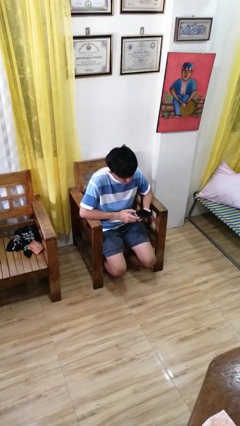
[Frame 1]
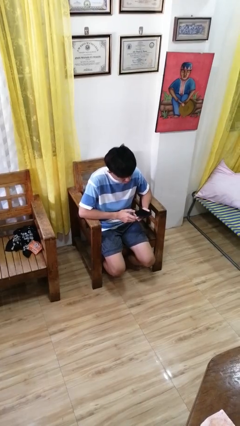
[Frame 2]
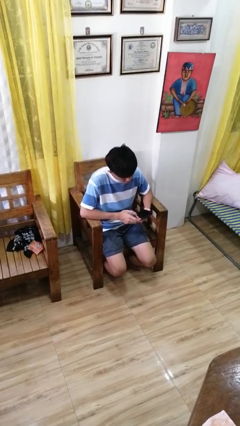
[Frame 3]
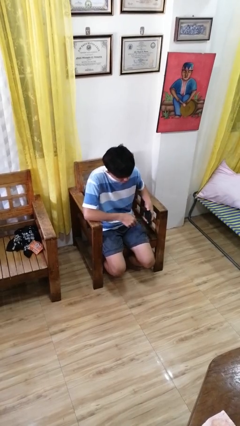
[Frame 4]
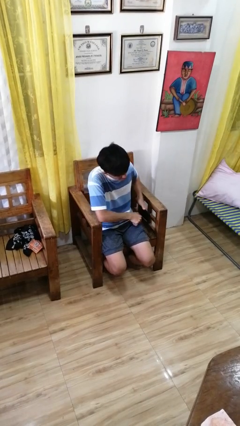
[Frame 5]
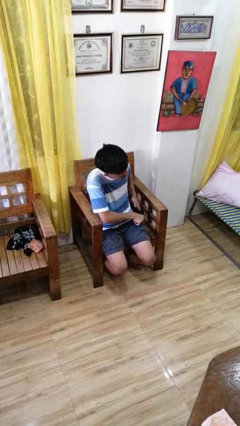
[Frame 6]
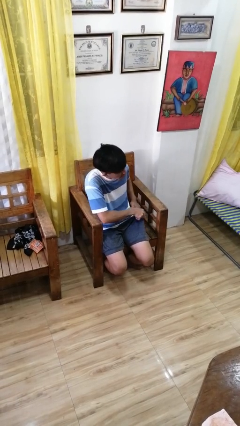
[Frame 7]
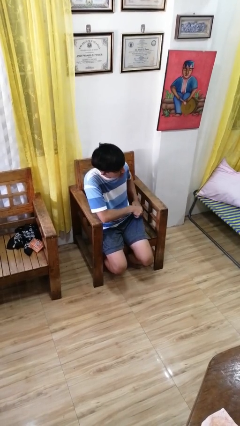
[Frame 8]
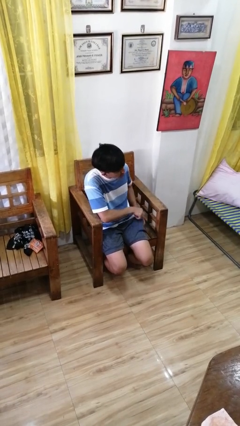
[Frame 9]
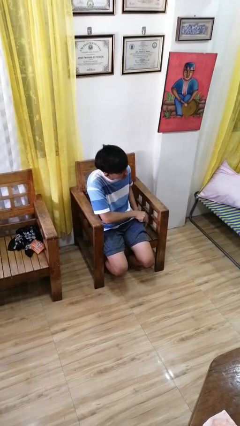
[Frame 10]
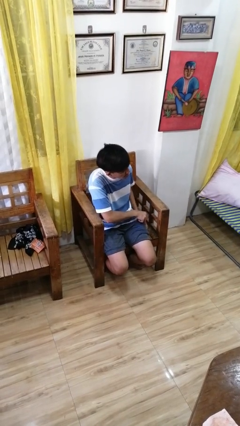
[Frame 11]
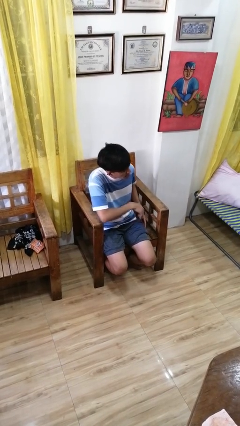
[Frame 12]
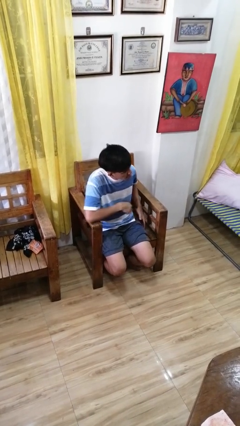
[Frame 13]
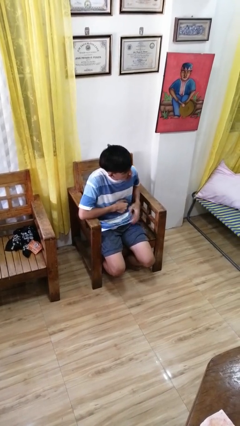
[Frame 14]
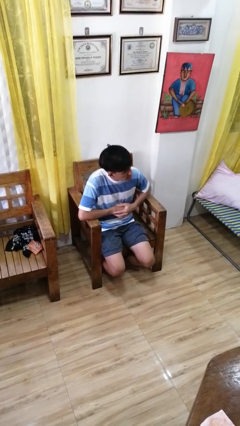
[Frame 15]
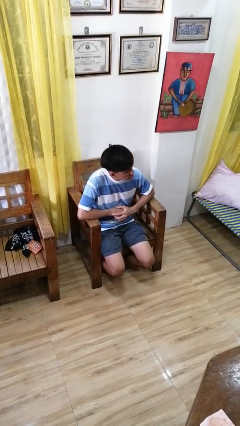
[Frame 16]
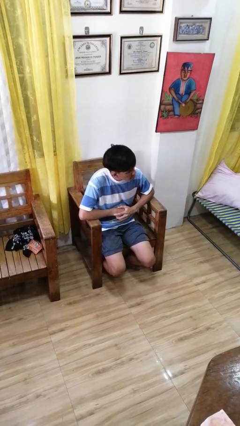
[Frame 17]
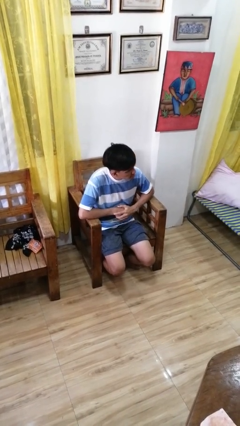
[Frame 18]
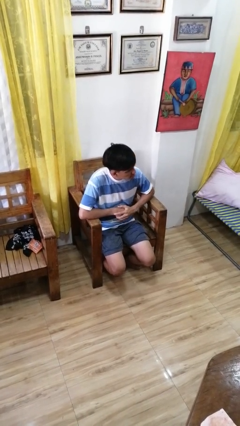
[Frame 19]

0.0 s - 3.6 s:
person puts phone into pocket

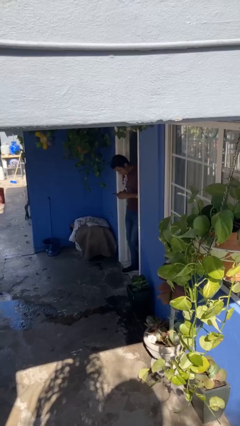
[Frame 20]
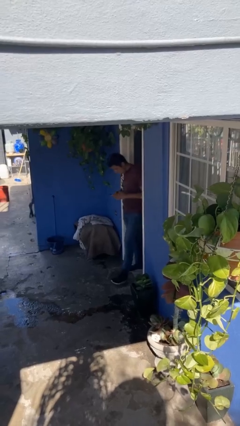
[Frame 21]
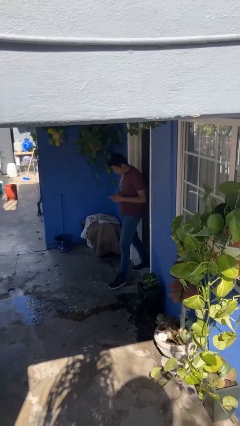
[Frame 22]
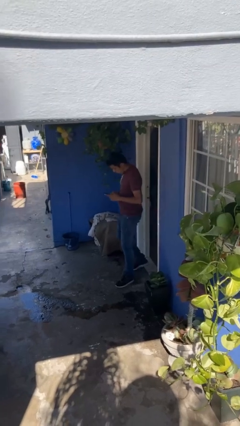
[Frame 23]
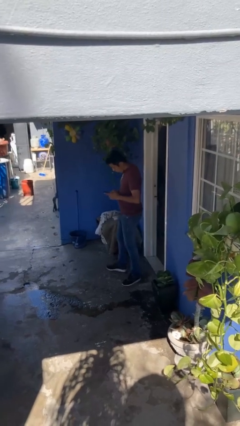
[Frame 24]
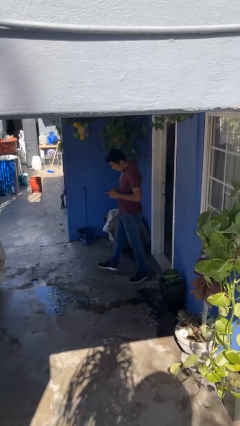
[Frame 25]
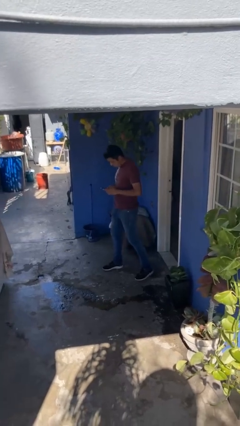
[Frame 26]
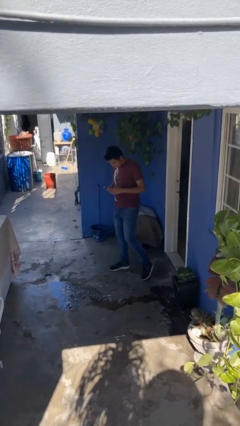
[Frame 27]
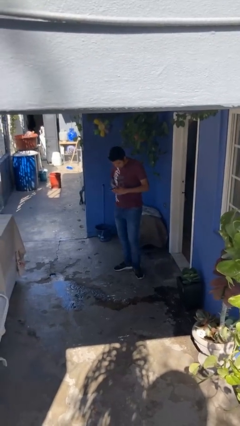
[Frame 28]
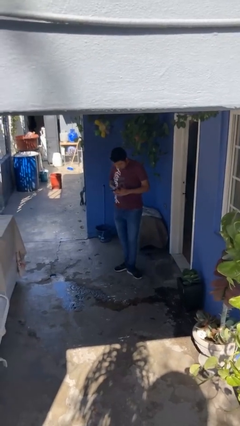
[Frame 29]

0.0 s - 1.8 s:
person enters scene through structure

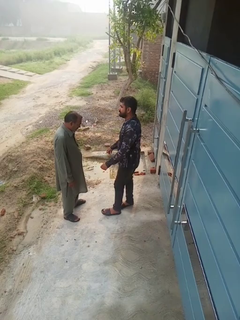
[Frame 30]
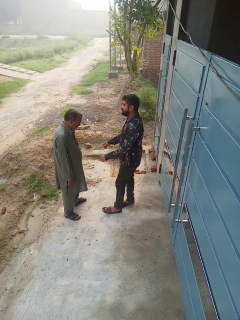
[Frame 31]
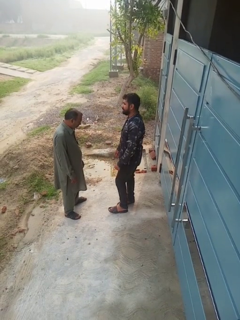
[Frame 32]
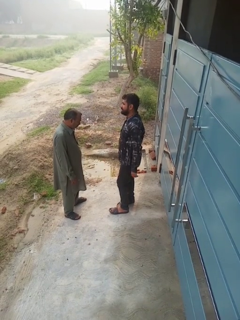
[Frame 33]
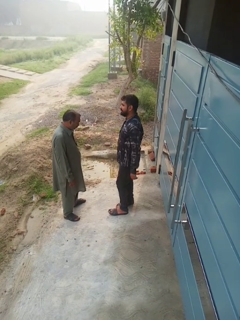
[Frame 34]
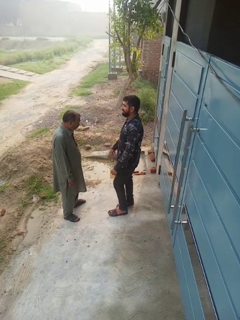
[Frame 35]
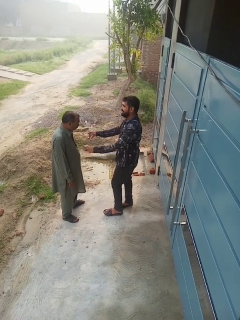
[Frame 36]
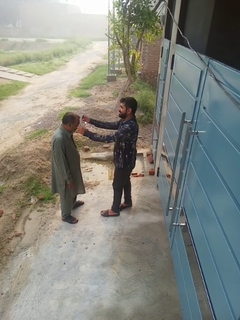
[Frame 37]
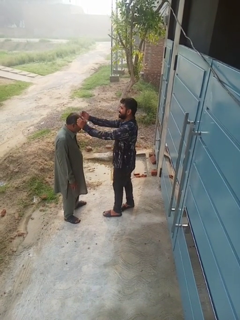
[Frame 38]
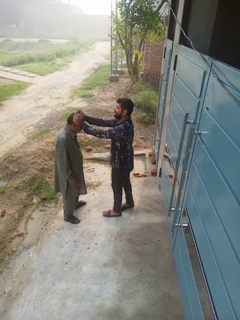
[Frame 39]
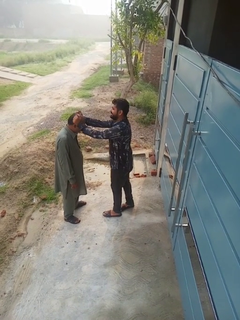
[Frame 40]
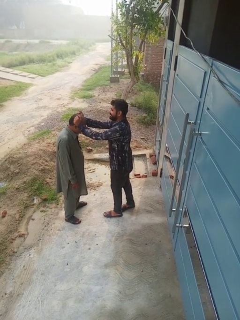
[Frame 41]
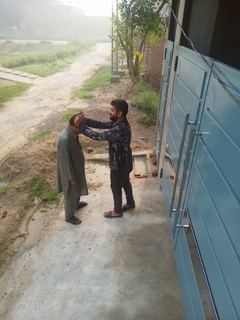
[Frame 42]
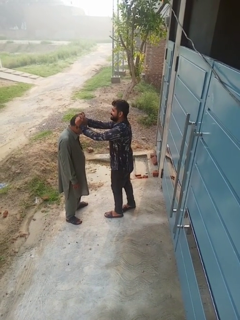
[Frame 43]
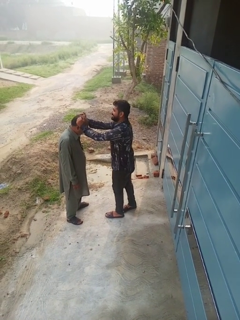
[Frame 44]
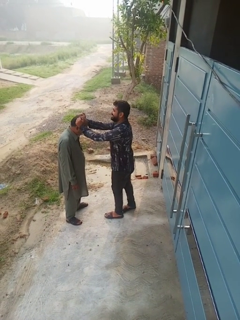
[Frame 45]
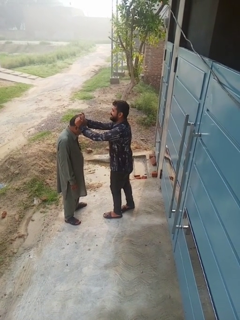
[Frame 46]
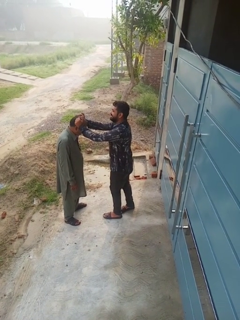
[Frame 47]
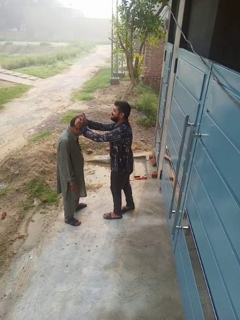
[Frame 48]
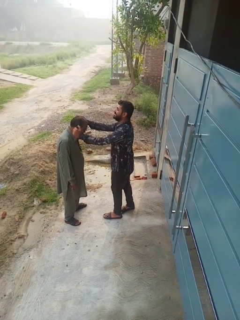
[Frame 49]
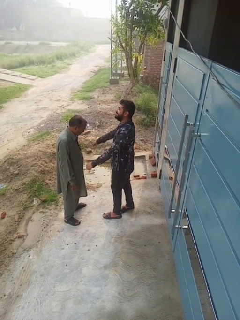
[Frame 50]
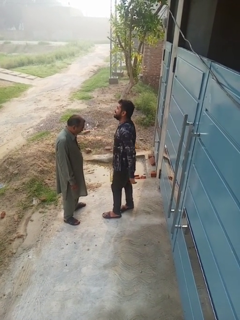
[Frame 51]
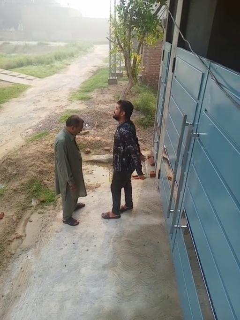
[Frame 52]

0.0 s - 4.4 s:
person grabs person by hair

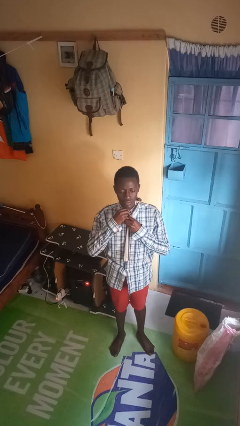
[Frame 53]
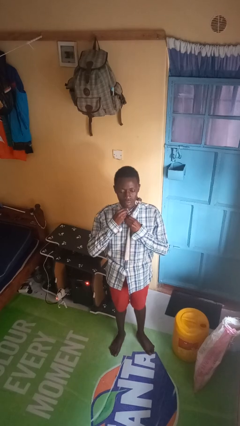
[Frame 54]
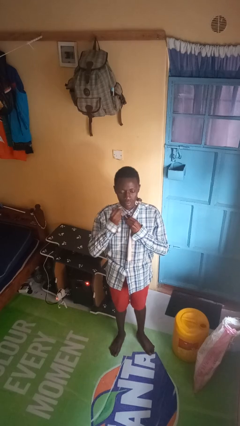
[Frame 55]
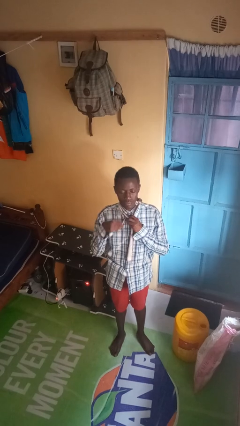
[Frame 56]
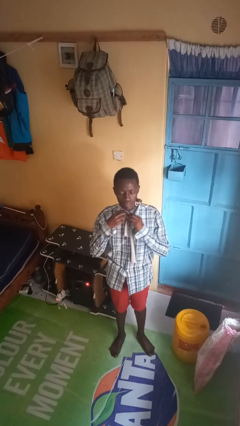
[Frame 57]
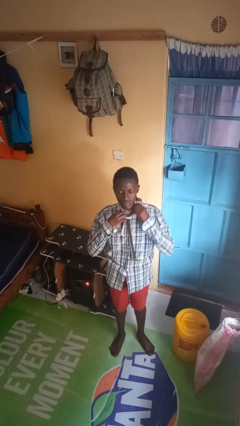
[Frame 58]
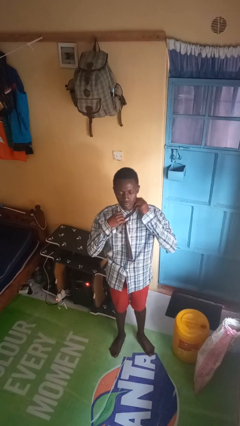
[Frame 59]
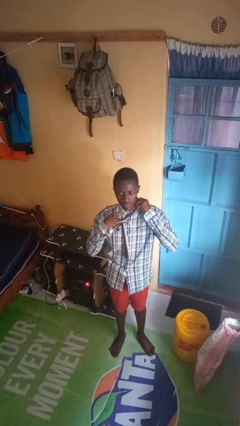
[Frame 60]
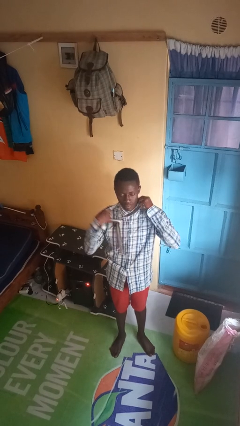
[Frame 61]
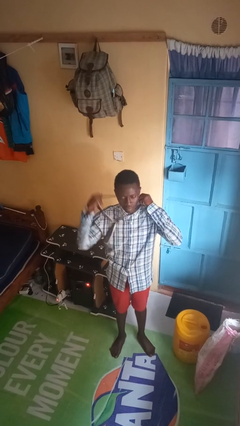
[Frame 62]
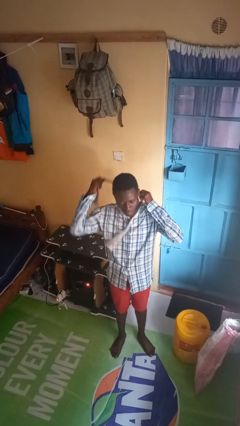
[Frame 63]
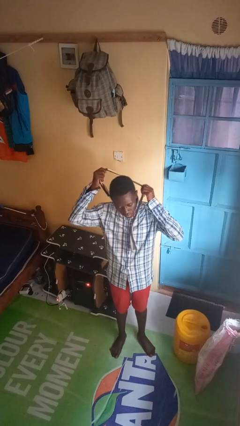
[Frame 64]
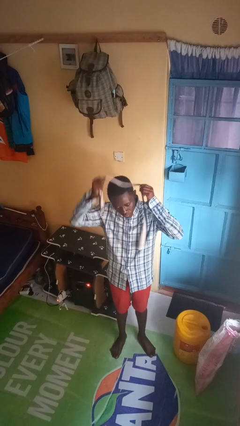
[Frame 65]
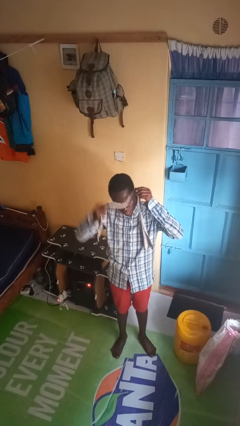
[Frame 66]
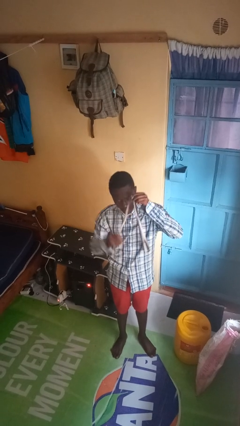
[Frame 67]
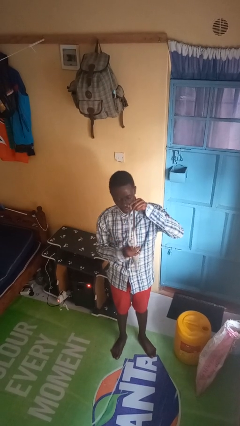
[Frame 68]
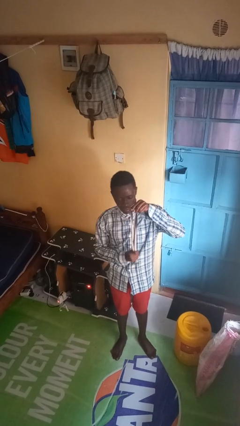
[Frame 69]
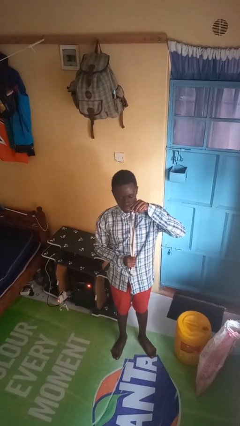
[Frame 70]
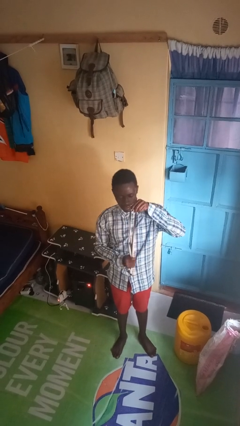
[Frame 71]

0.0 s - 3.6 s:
person takes off necktie

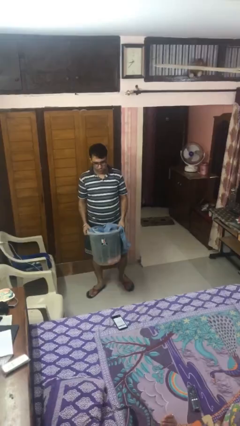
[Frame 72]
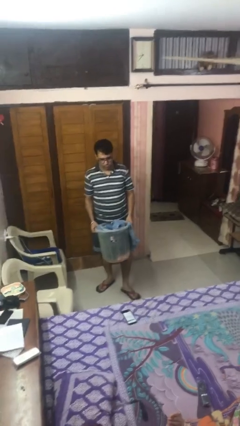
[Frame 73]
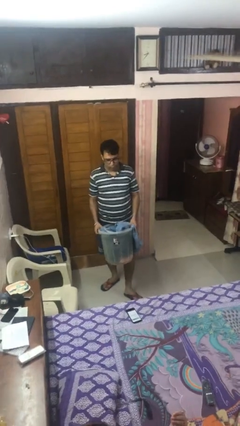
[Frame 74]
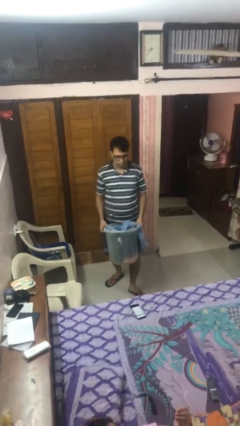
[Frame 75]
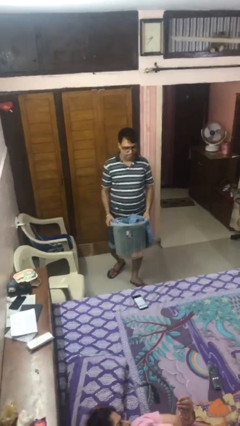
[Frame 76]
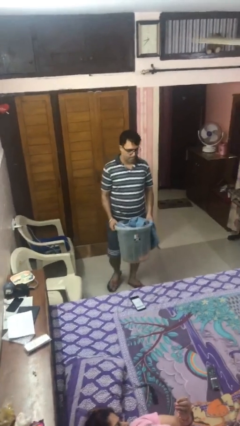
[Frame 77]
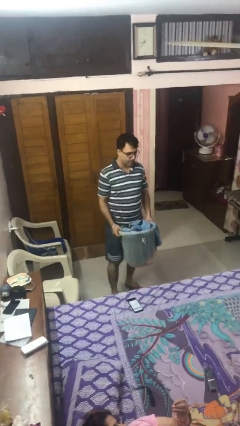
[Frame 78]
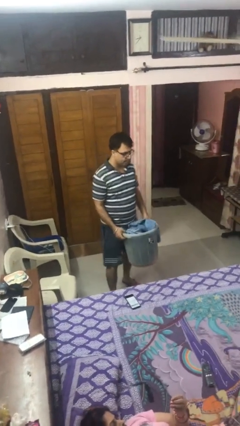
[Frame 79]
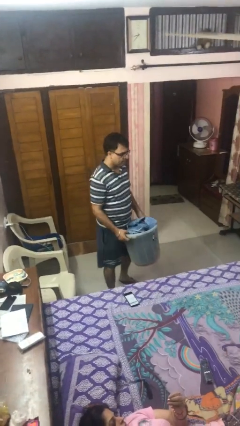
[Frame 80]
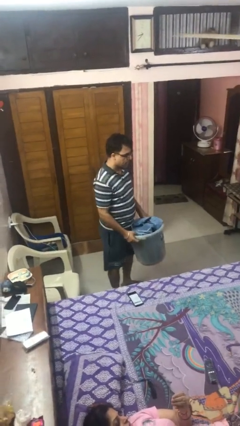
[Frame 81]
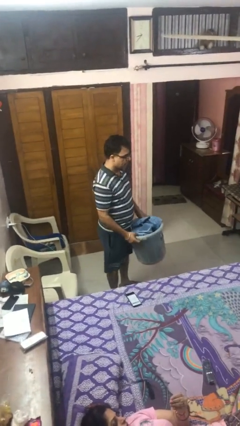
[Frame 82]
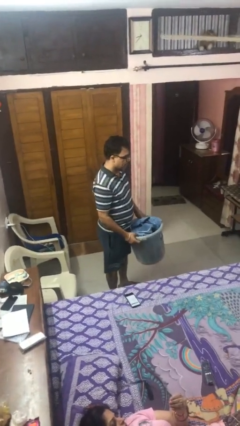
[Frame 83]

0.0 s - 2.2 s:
person carries laundry basket

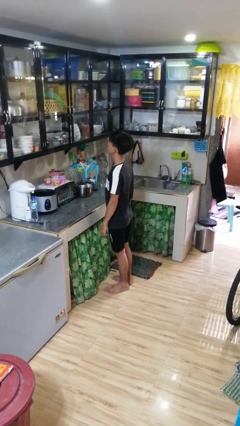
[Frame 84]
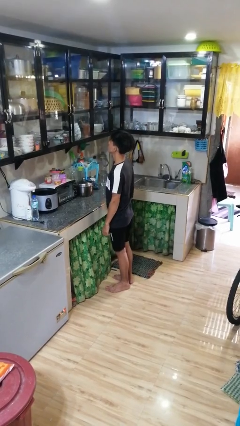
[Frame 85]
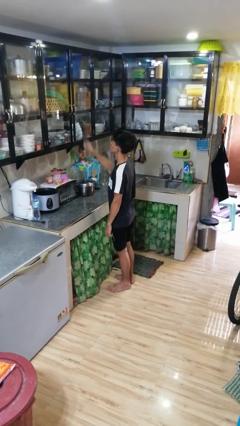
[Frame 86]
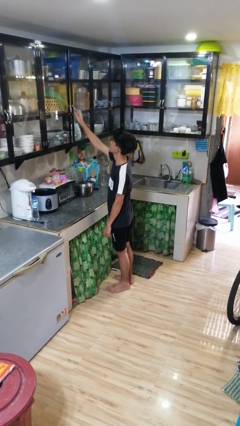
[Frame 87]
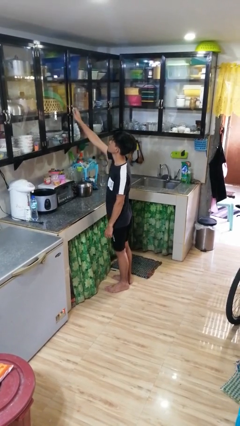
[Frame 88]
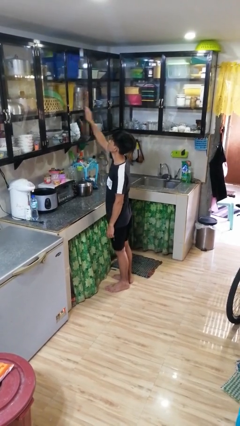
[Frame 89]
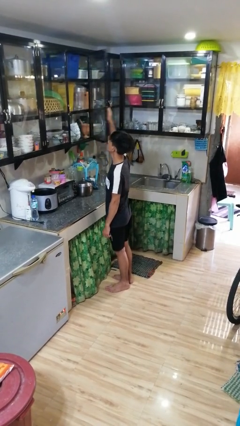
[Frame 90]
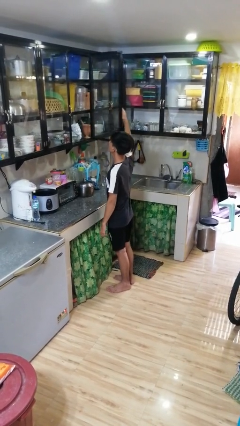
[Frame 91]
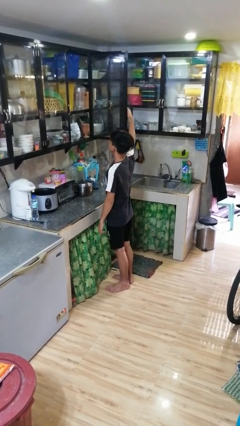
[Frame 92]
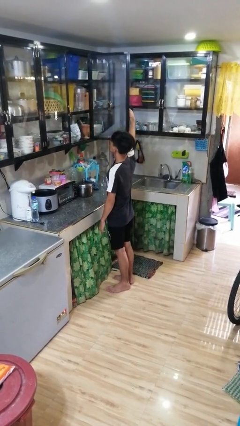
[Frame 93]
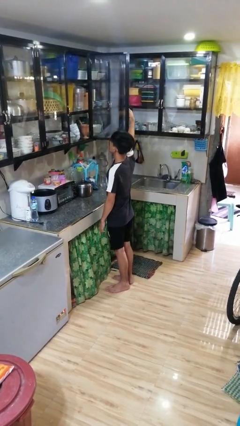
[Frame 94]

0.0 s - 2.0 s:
person opens cabinet

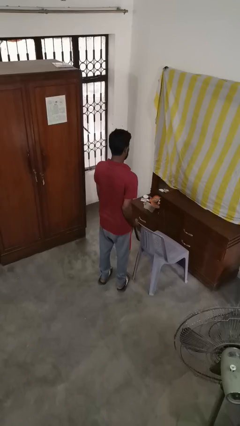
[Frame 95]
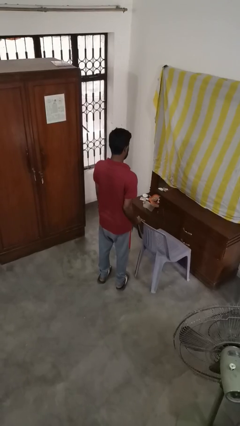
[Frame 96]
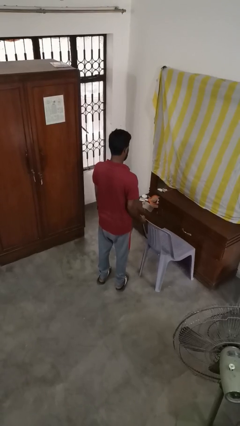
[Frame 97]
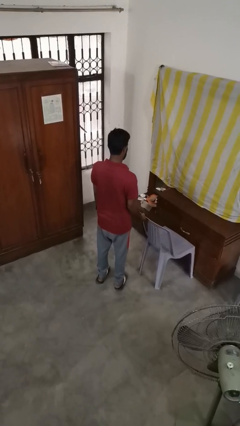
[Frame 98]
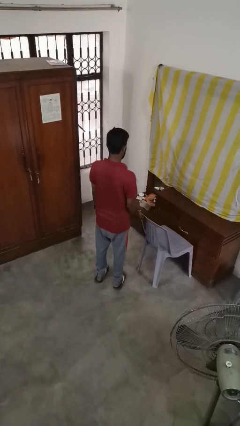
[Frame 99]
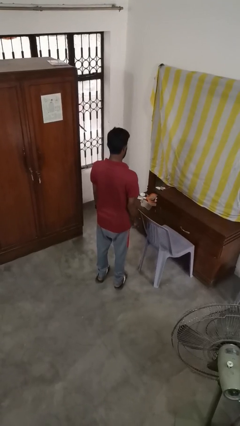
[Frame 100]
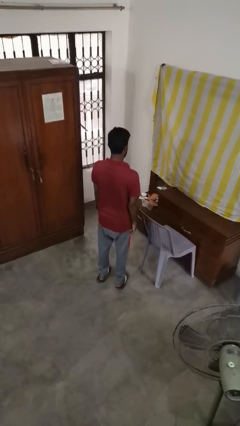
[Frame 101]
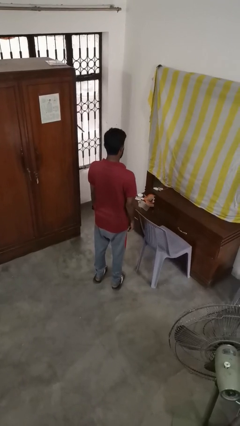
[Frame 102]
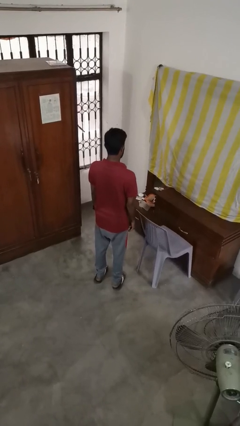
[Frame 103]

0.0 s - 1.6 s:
person pushes in chair
